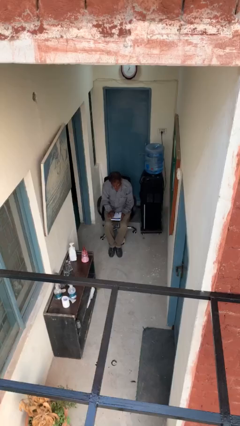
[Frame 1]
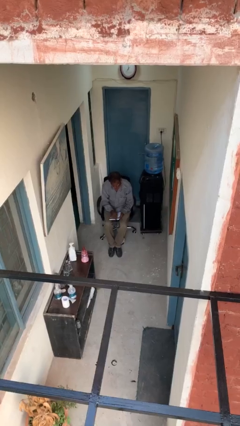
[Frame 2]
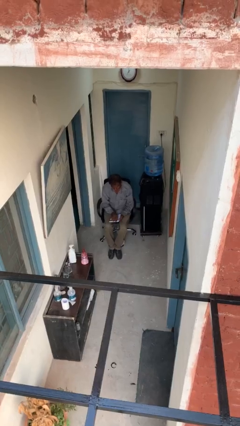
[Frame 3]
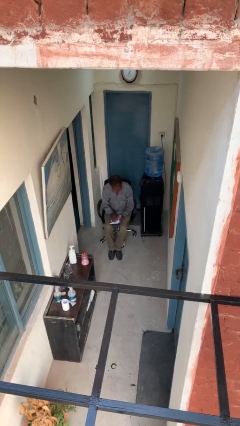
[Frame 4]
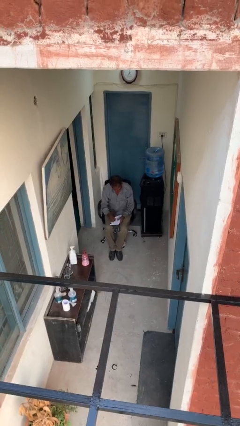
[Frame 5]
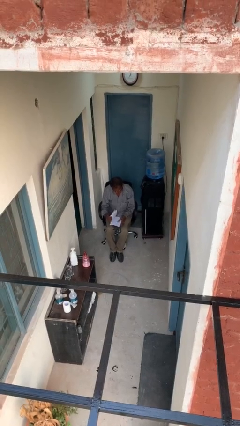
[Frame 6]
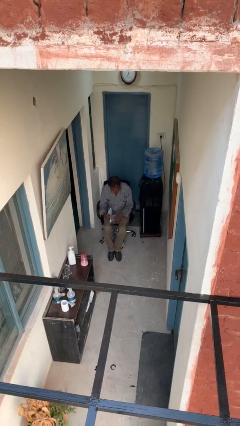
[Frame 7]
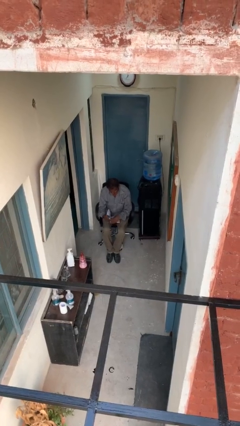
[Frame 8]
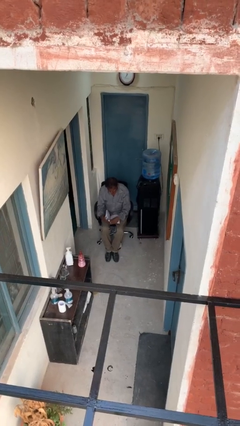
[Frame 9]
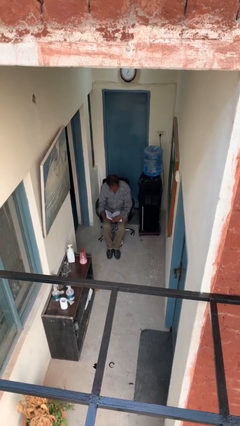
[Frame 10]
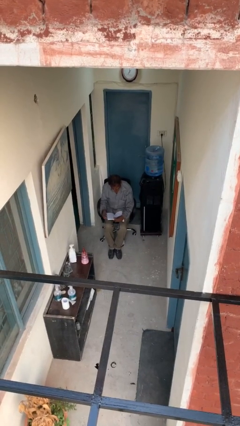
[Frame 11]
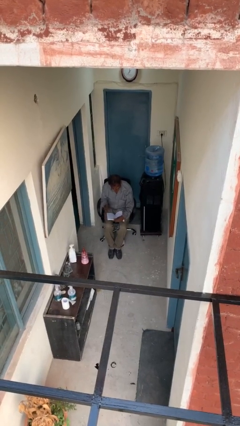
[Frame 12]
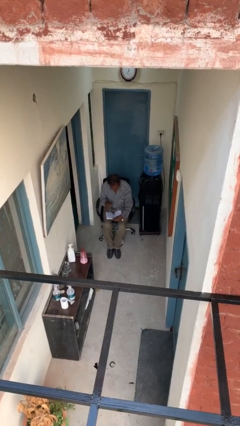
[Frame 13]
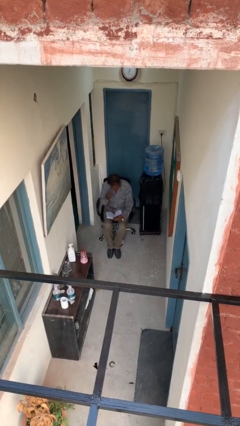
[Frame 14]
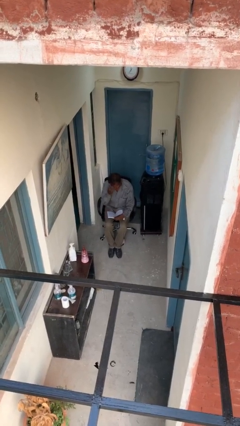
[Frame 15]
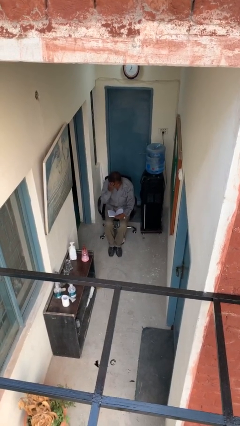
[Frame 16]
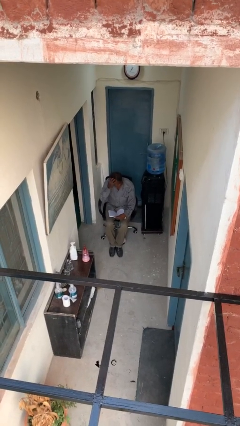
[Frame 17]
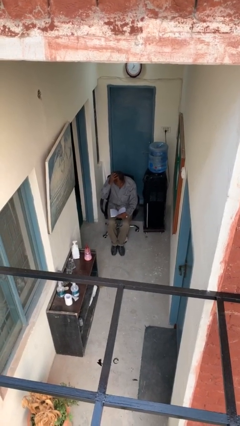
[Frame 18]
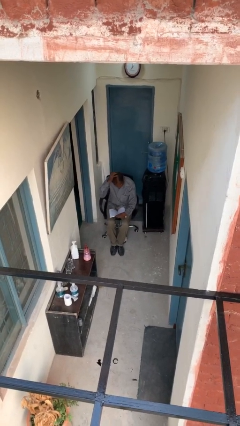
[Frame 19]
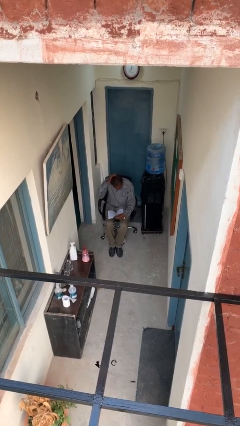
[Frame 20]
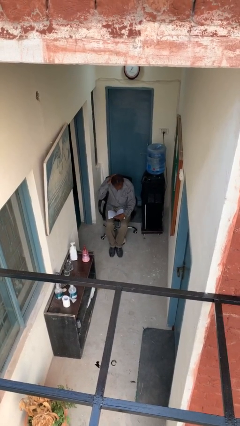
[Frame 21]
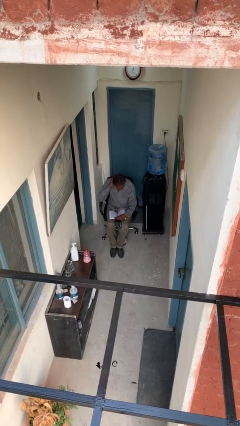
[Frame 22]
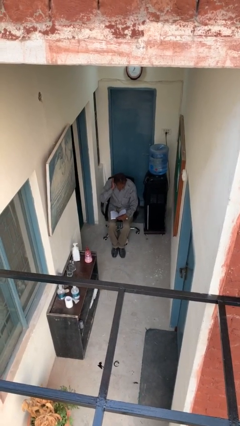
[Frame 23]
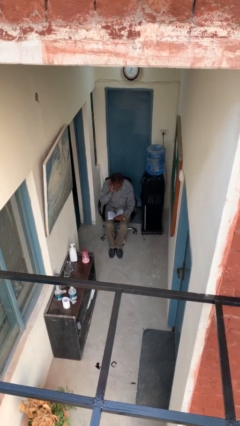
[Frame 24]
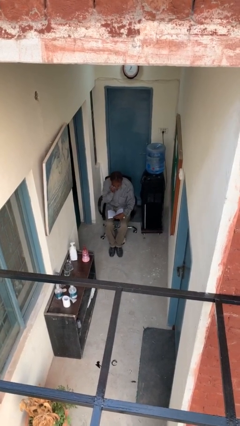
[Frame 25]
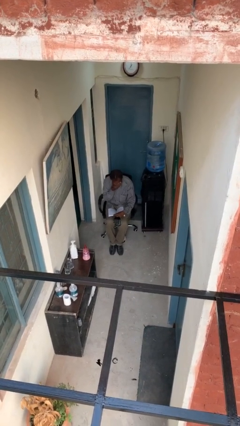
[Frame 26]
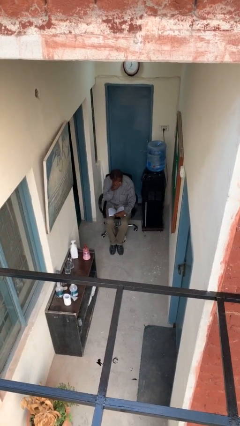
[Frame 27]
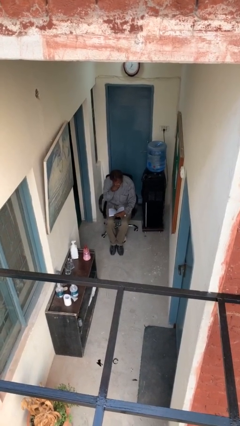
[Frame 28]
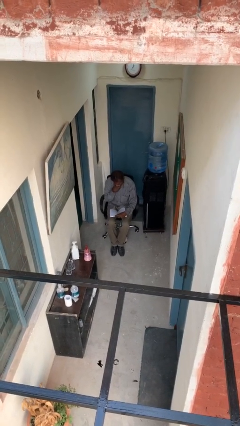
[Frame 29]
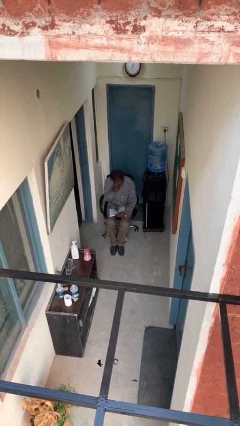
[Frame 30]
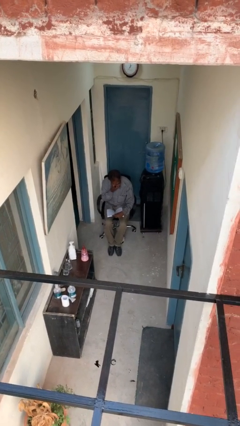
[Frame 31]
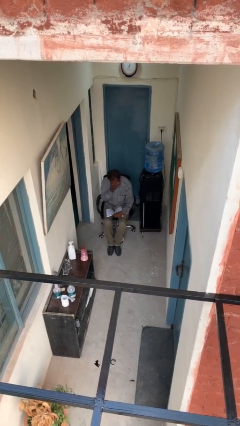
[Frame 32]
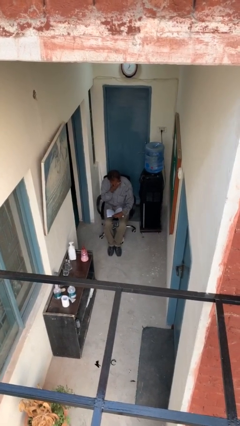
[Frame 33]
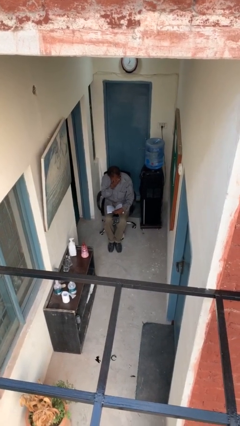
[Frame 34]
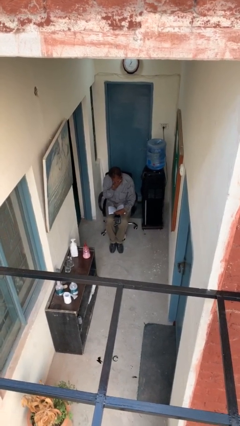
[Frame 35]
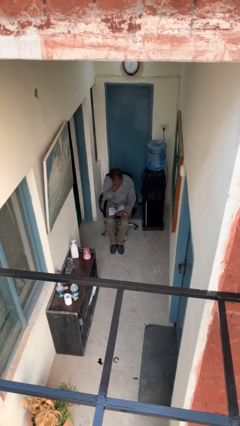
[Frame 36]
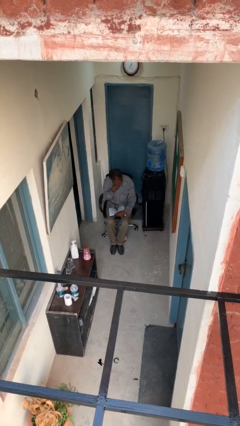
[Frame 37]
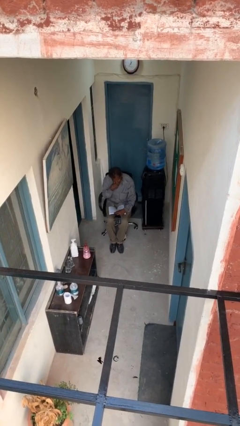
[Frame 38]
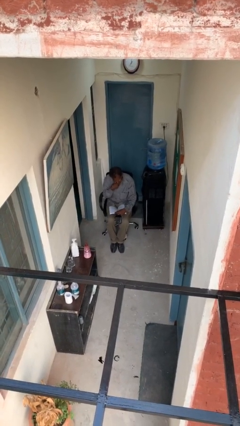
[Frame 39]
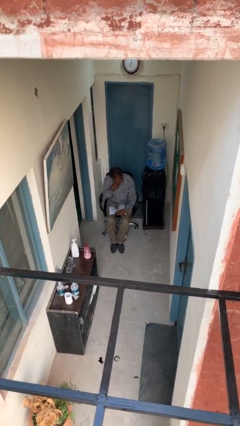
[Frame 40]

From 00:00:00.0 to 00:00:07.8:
person reads document

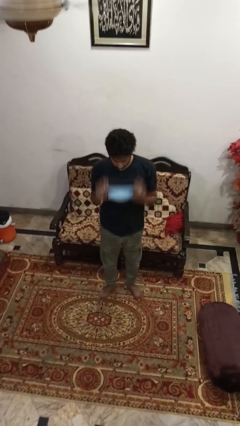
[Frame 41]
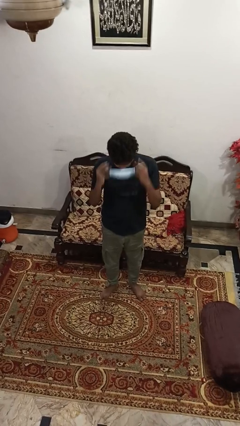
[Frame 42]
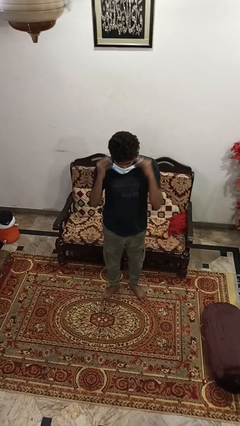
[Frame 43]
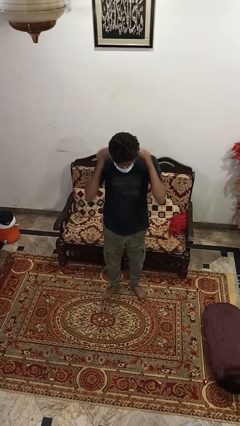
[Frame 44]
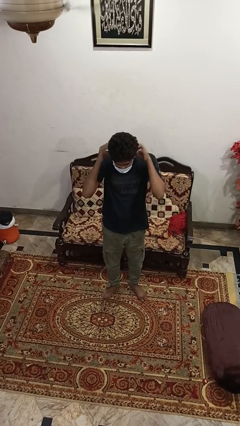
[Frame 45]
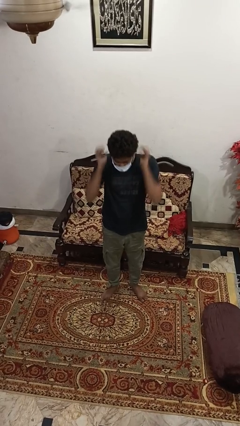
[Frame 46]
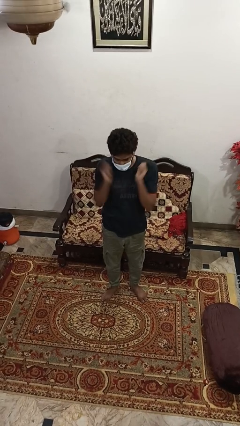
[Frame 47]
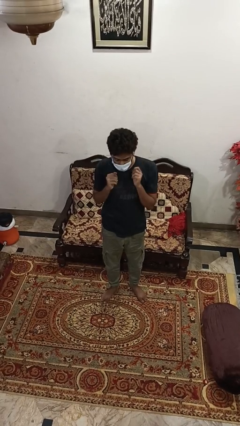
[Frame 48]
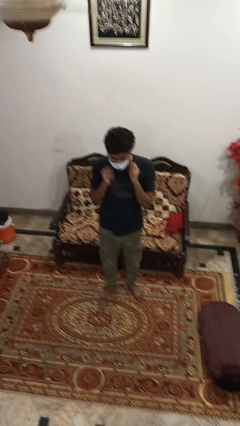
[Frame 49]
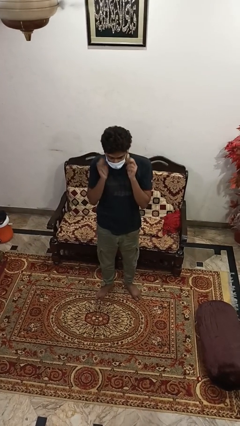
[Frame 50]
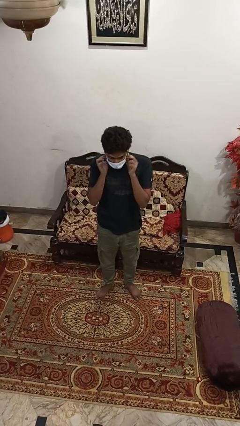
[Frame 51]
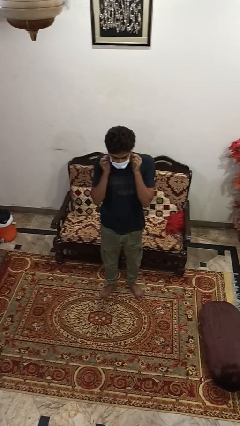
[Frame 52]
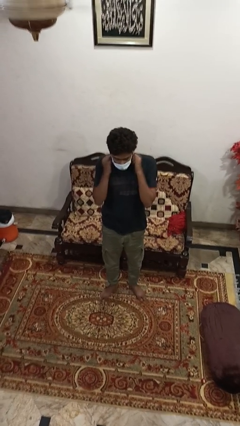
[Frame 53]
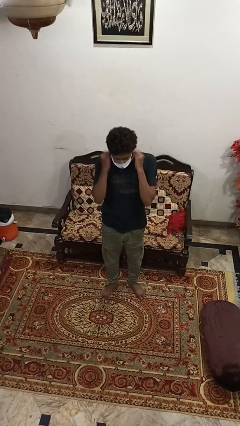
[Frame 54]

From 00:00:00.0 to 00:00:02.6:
person puts on facemask

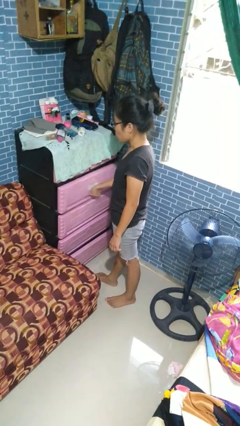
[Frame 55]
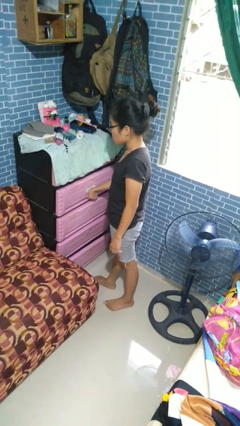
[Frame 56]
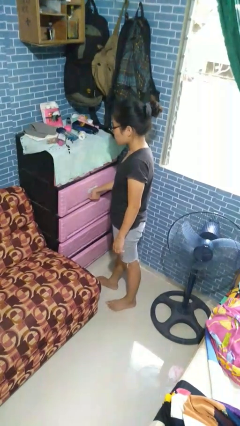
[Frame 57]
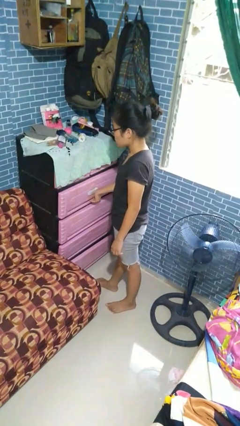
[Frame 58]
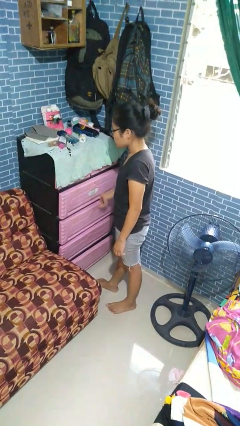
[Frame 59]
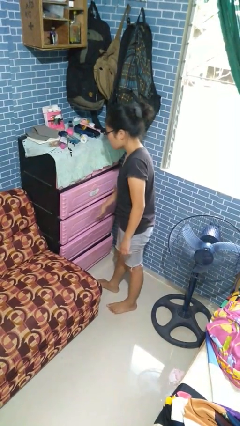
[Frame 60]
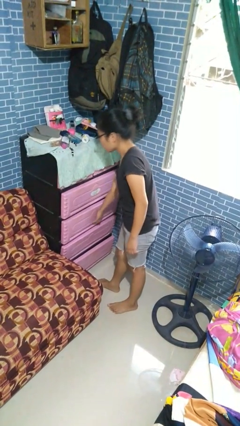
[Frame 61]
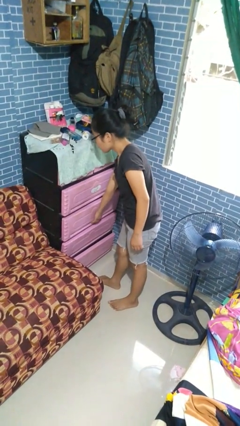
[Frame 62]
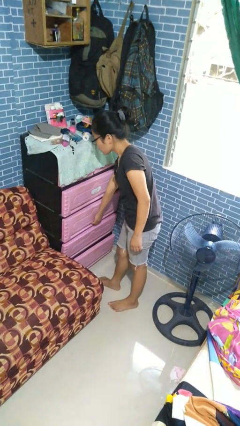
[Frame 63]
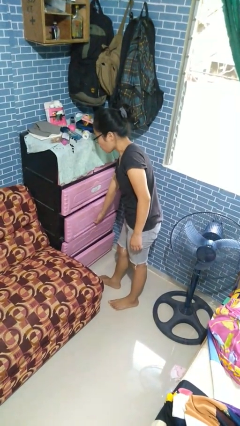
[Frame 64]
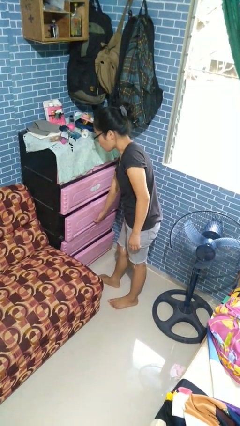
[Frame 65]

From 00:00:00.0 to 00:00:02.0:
person closes dresser drawer

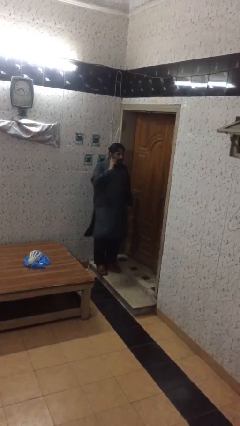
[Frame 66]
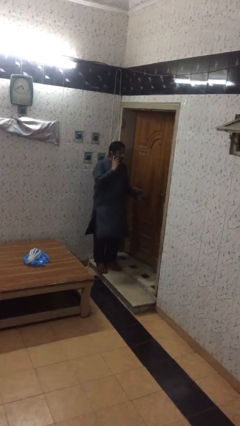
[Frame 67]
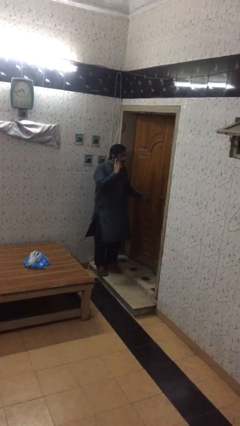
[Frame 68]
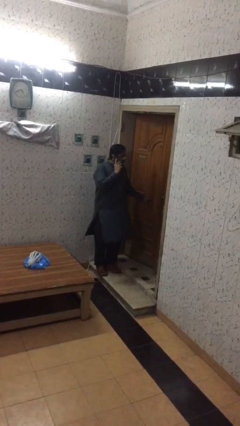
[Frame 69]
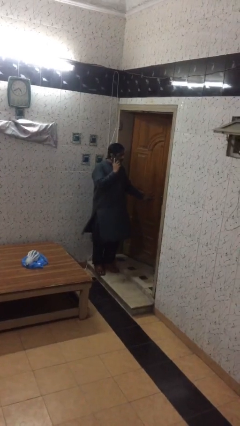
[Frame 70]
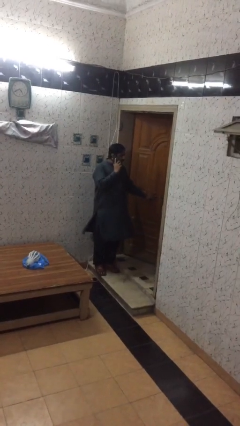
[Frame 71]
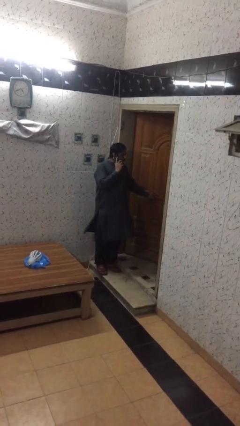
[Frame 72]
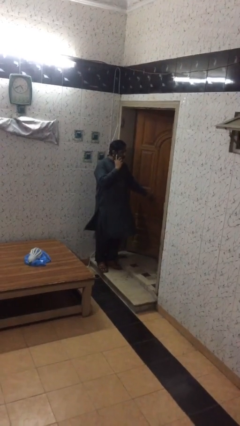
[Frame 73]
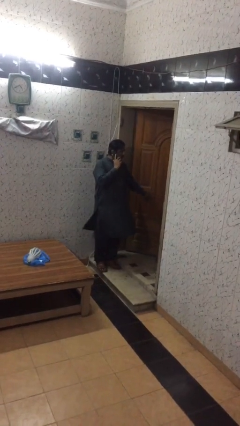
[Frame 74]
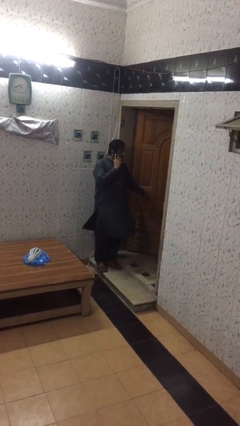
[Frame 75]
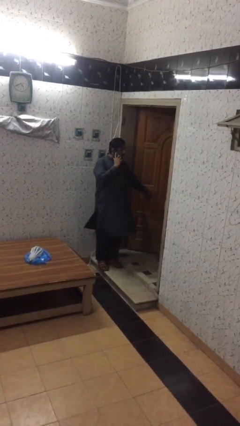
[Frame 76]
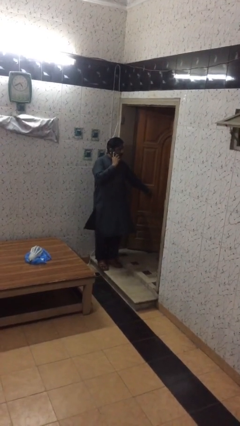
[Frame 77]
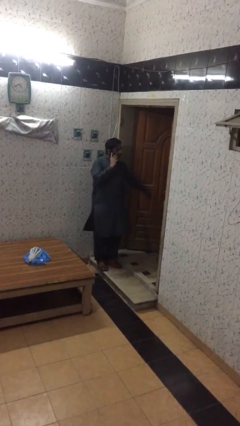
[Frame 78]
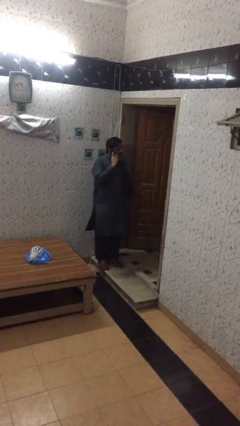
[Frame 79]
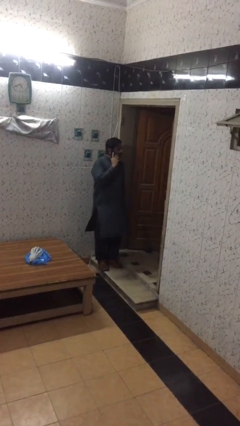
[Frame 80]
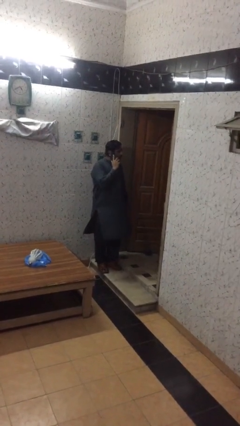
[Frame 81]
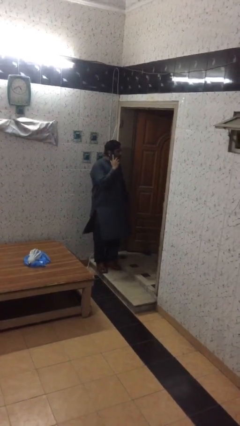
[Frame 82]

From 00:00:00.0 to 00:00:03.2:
person opens facility door

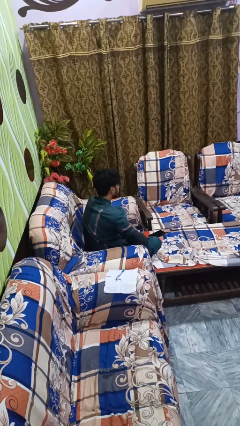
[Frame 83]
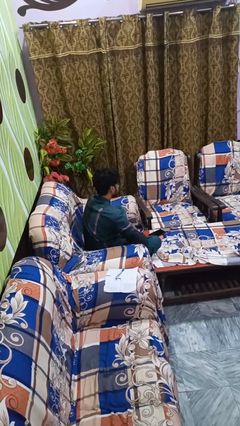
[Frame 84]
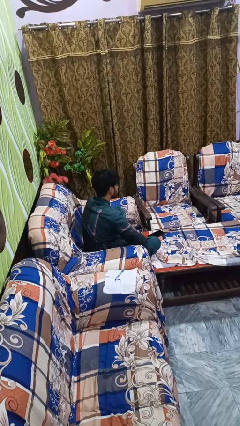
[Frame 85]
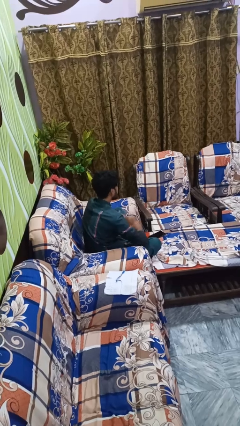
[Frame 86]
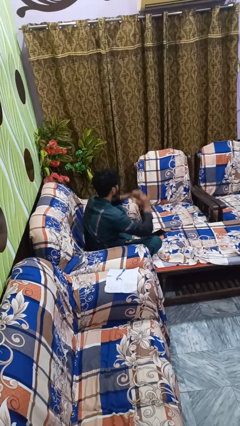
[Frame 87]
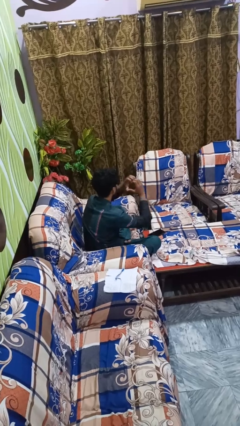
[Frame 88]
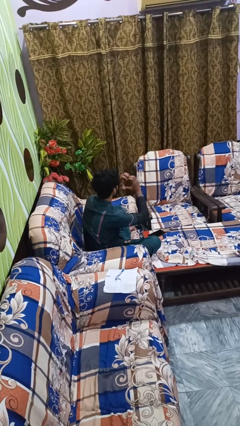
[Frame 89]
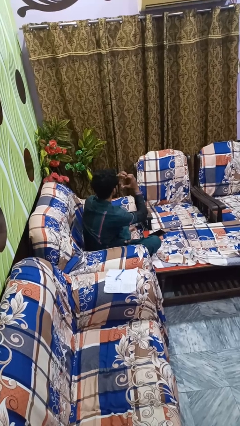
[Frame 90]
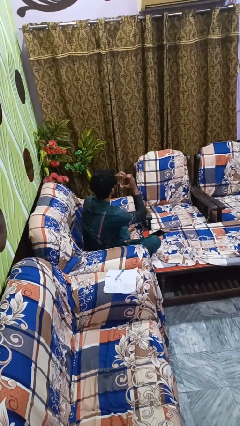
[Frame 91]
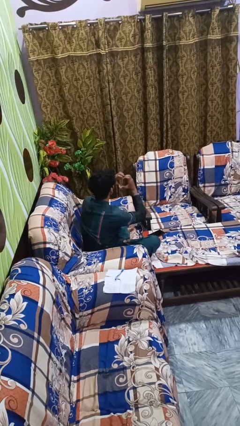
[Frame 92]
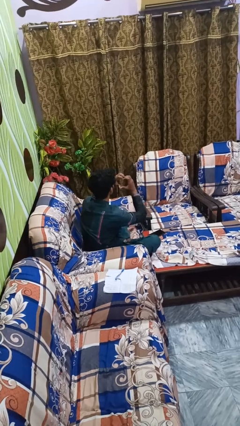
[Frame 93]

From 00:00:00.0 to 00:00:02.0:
person gestures heart
